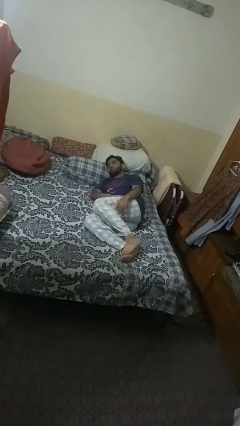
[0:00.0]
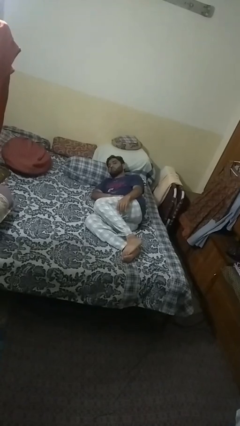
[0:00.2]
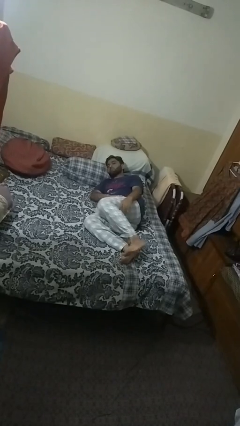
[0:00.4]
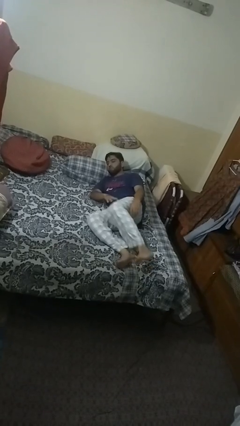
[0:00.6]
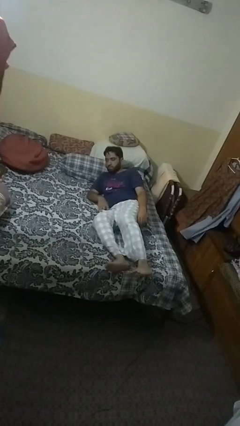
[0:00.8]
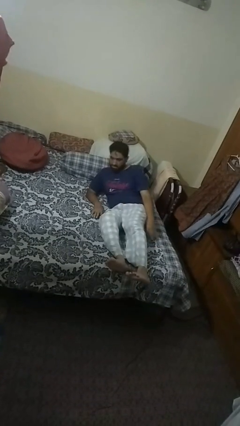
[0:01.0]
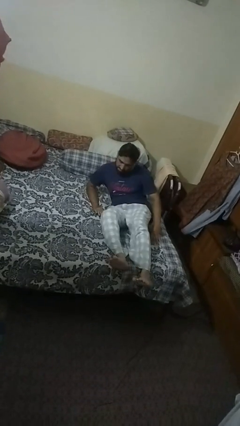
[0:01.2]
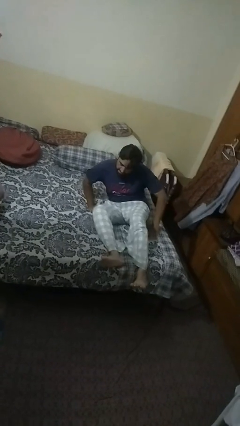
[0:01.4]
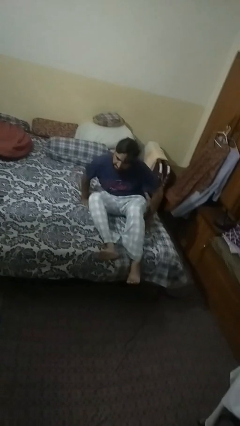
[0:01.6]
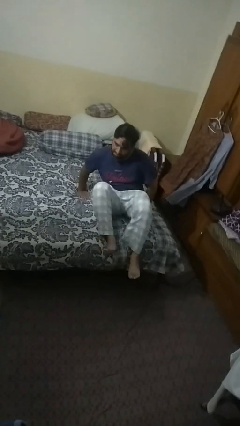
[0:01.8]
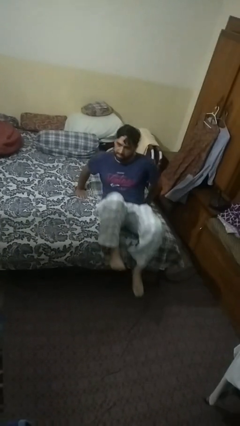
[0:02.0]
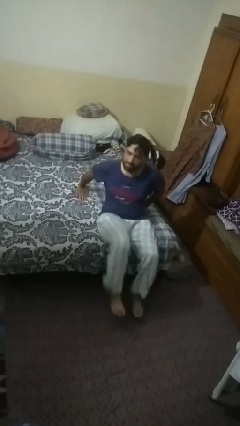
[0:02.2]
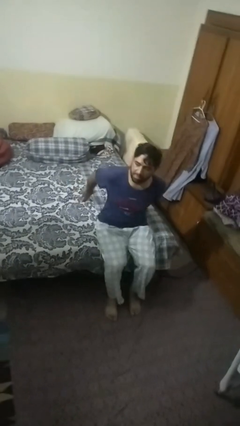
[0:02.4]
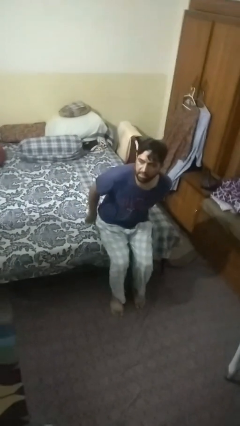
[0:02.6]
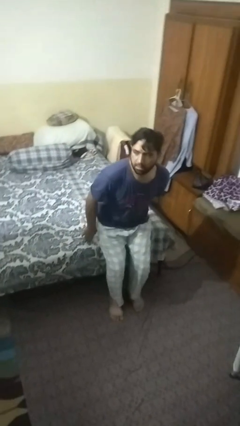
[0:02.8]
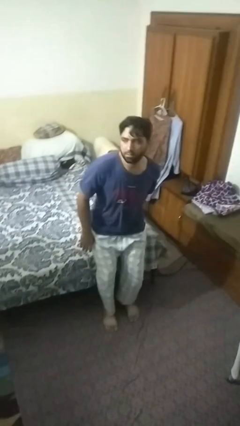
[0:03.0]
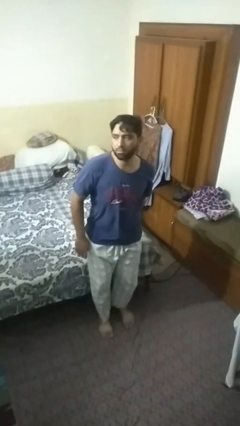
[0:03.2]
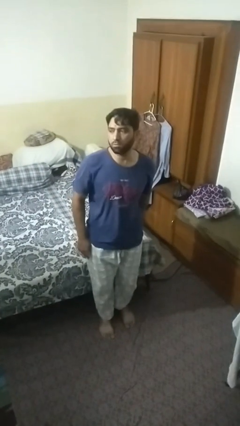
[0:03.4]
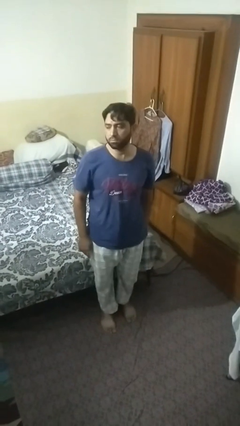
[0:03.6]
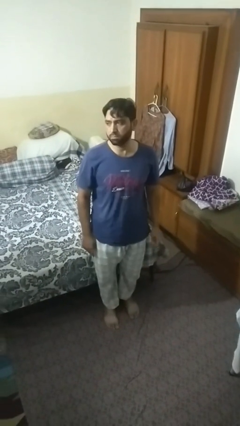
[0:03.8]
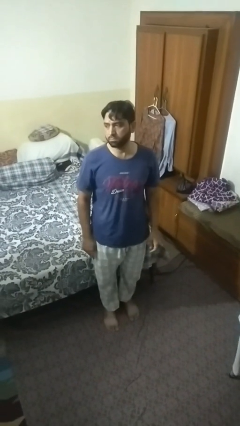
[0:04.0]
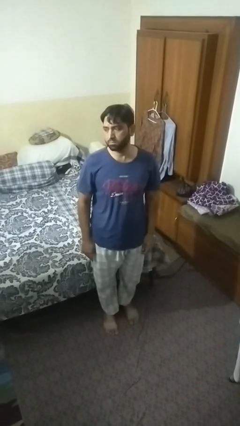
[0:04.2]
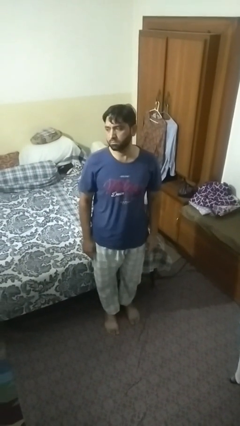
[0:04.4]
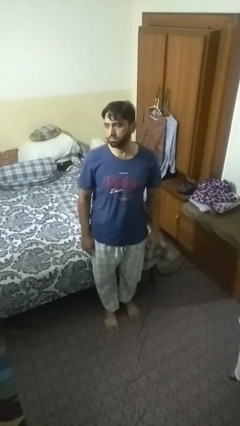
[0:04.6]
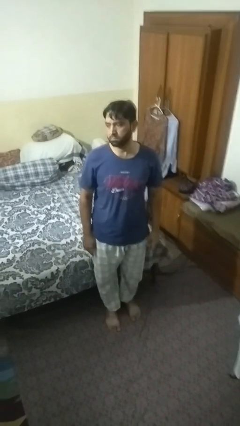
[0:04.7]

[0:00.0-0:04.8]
person stands up

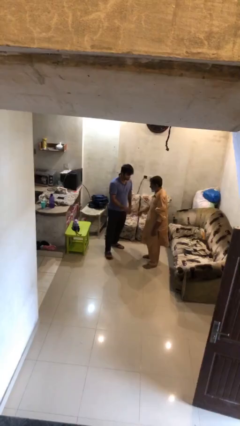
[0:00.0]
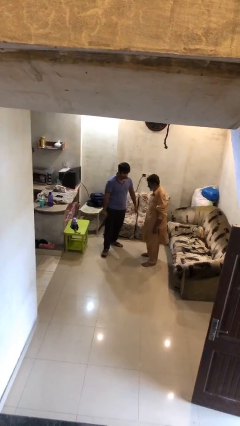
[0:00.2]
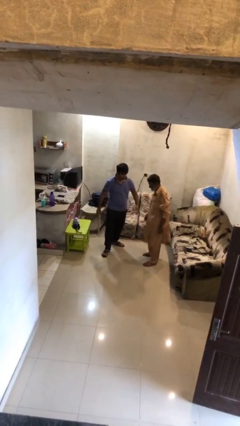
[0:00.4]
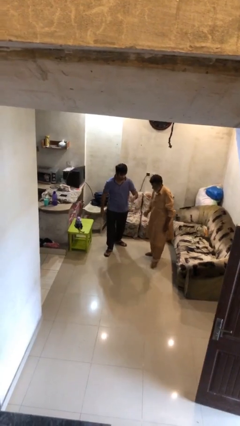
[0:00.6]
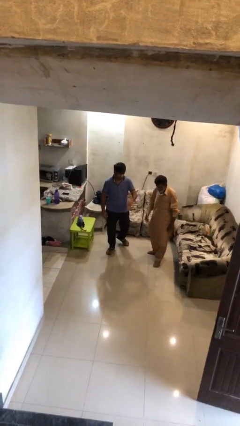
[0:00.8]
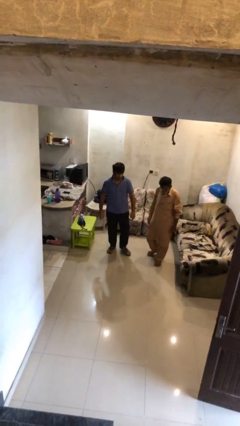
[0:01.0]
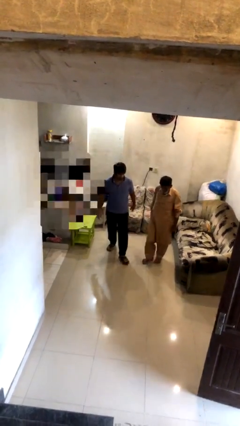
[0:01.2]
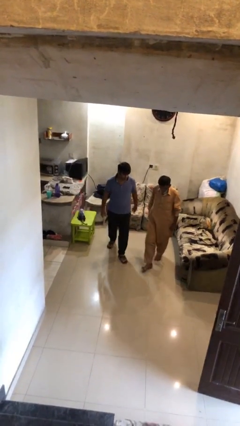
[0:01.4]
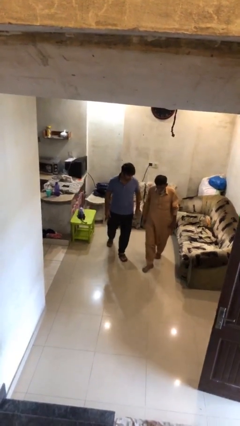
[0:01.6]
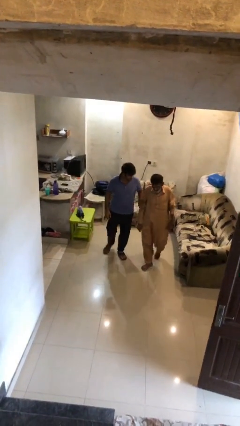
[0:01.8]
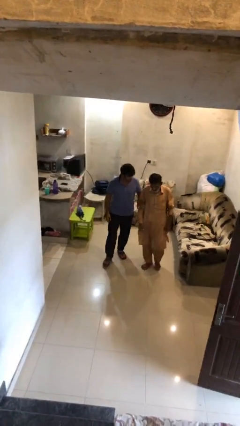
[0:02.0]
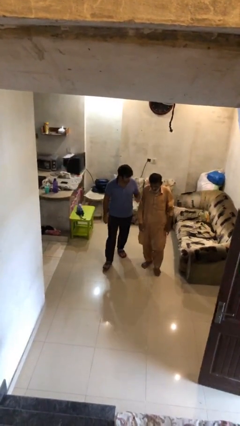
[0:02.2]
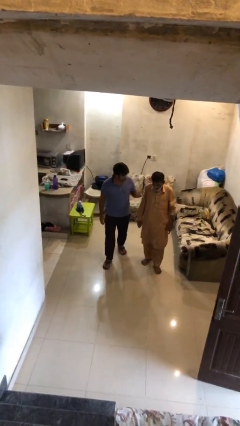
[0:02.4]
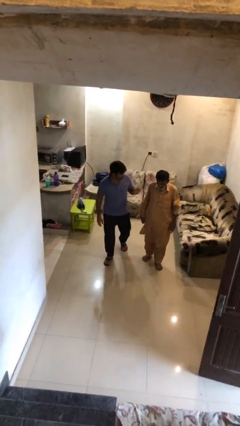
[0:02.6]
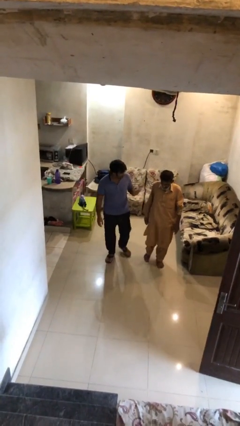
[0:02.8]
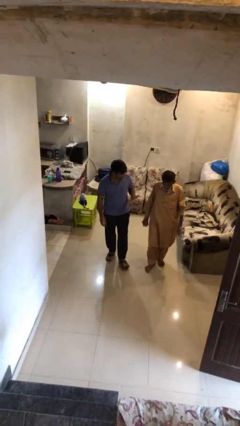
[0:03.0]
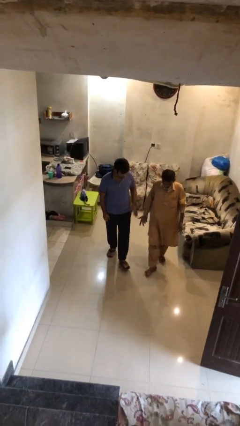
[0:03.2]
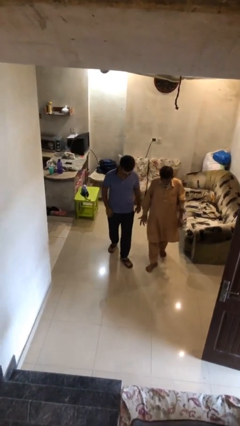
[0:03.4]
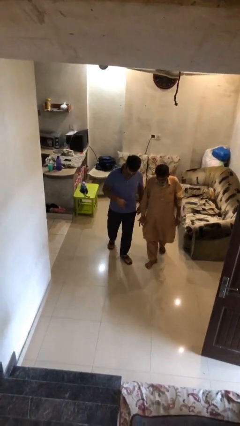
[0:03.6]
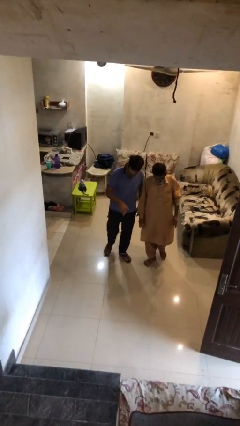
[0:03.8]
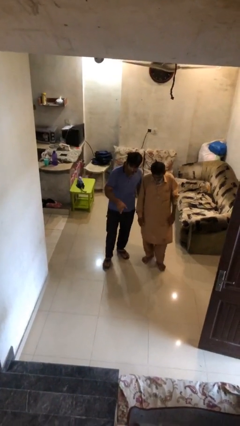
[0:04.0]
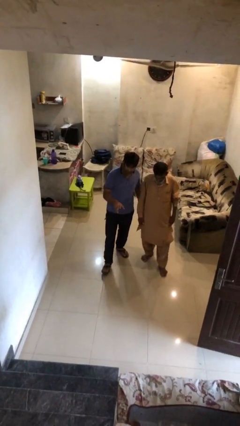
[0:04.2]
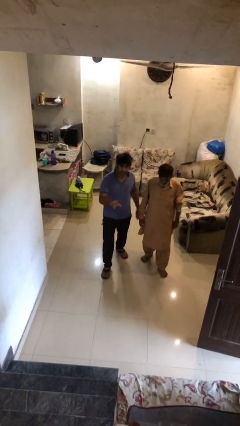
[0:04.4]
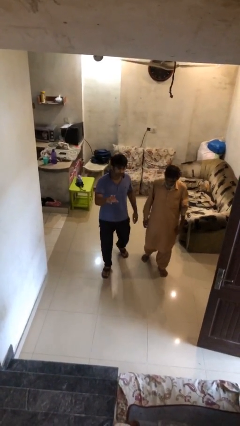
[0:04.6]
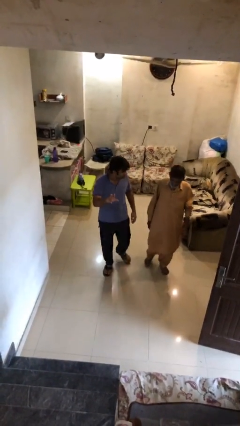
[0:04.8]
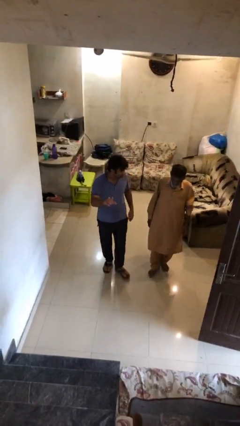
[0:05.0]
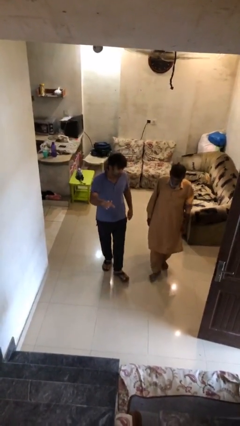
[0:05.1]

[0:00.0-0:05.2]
person talks to person

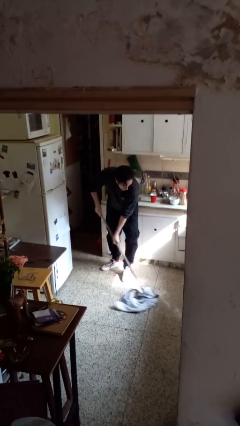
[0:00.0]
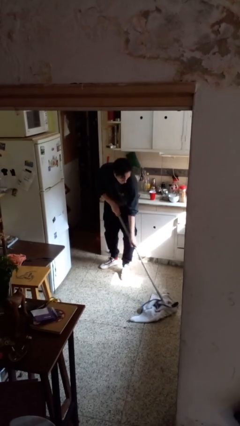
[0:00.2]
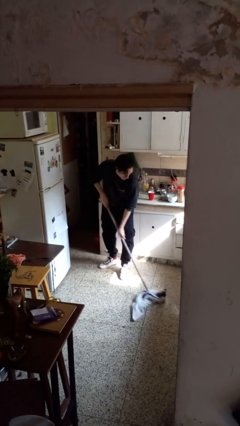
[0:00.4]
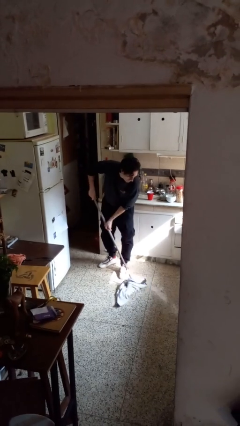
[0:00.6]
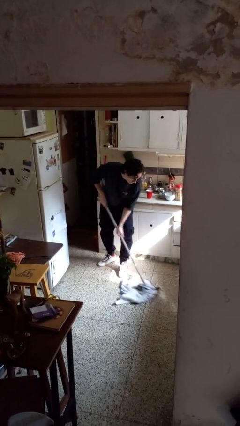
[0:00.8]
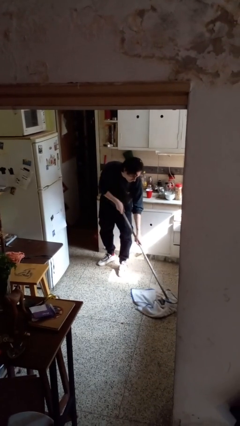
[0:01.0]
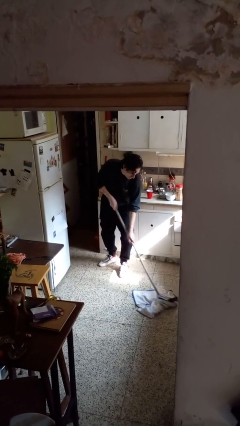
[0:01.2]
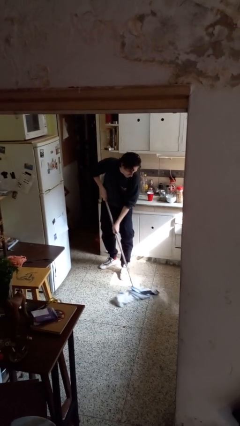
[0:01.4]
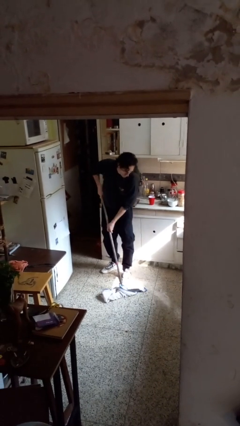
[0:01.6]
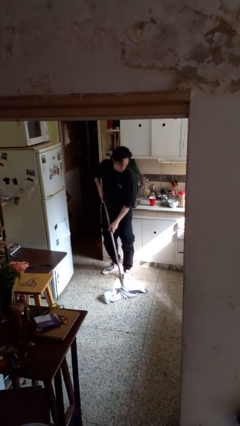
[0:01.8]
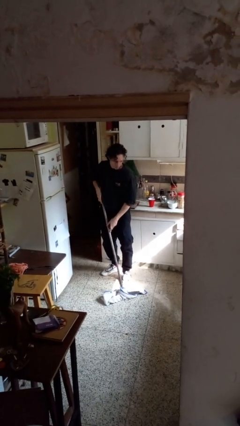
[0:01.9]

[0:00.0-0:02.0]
person mops

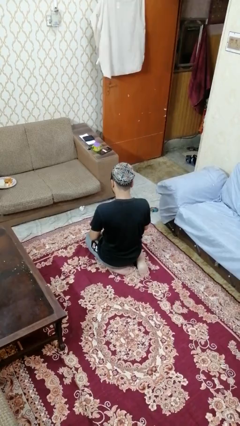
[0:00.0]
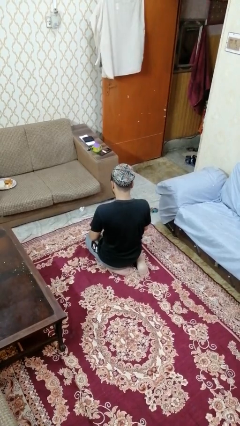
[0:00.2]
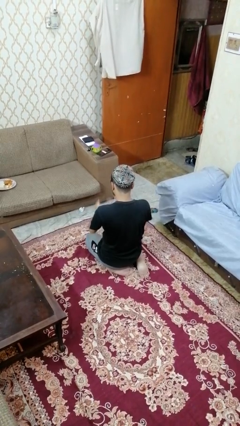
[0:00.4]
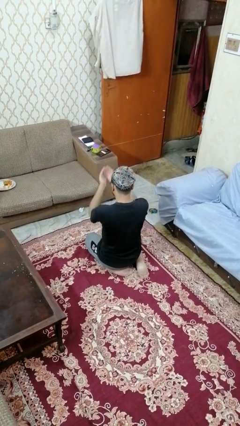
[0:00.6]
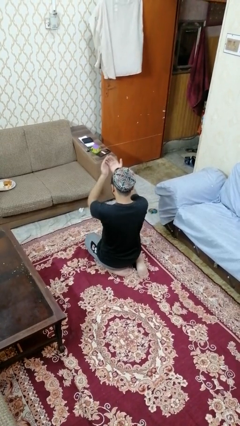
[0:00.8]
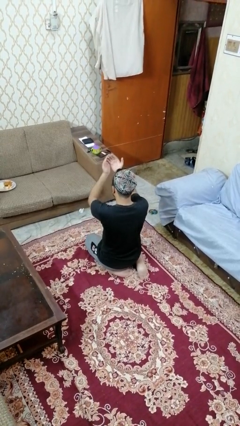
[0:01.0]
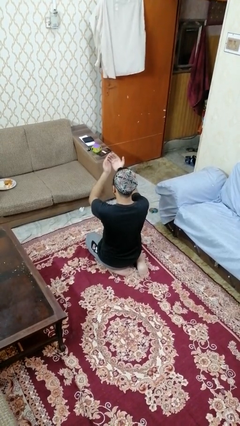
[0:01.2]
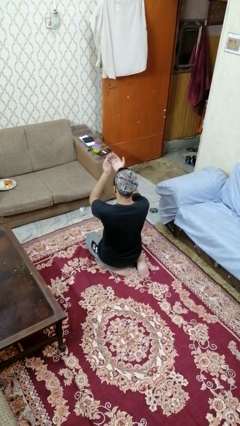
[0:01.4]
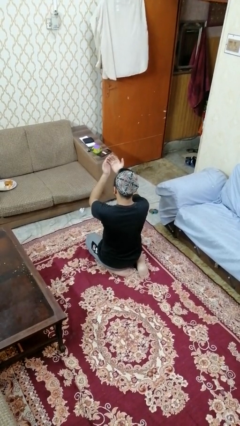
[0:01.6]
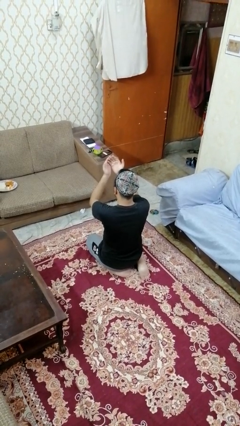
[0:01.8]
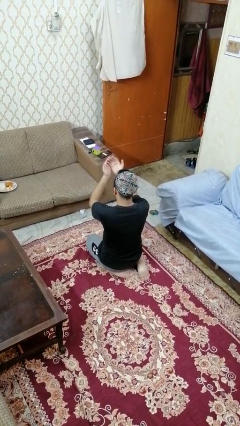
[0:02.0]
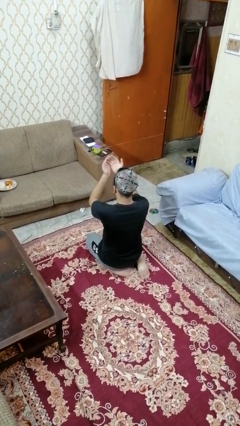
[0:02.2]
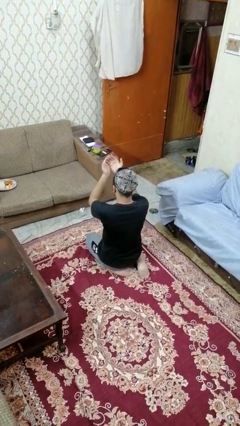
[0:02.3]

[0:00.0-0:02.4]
person prays

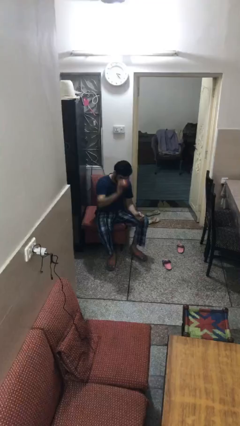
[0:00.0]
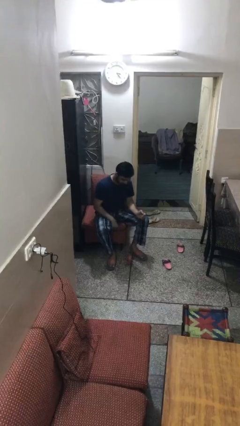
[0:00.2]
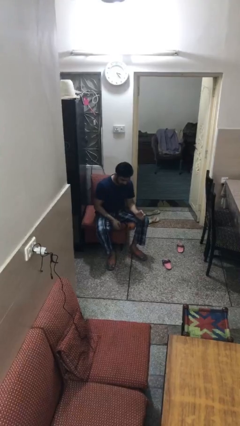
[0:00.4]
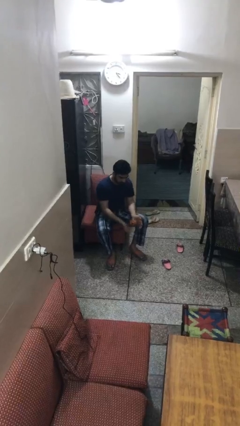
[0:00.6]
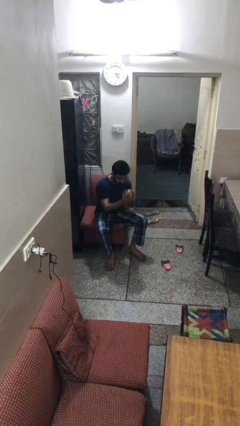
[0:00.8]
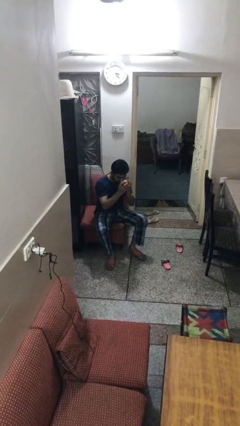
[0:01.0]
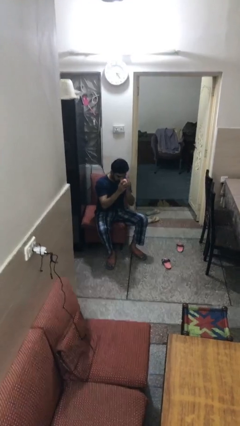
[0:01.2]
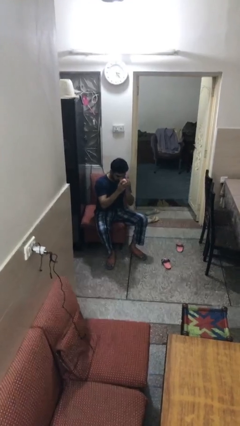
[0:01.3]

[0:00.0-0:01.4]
person bounces ball on floor

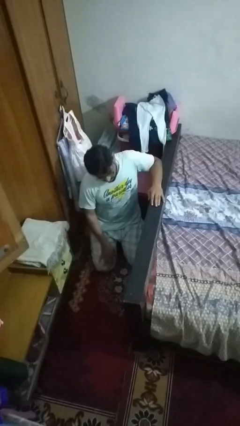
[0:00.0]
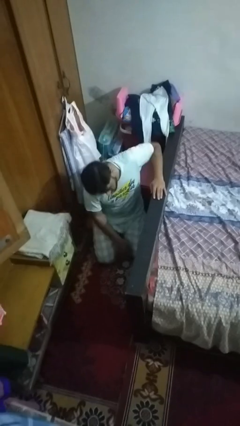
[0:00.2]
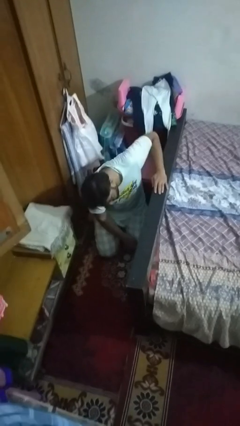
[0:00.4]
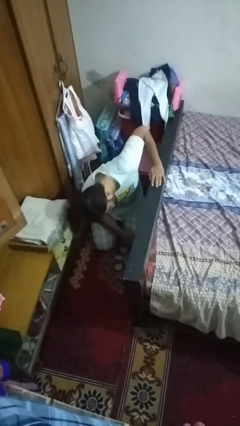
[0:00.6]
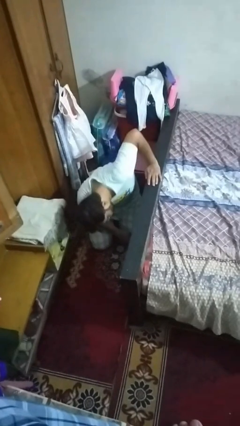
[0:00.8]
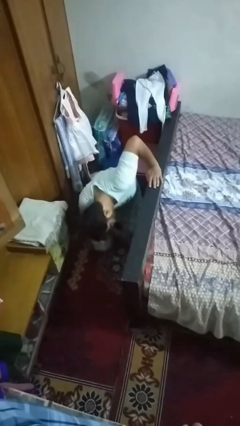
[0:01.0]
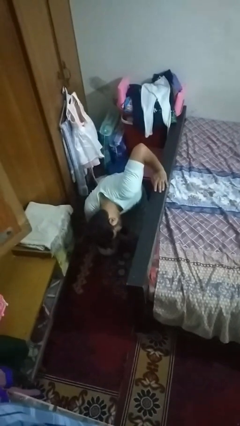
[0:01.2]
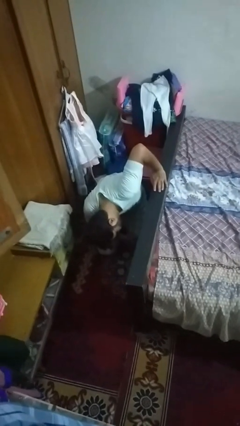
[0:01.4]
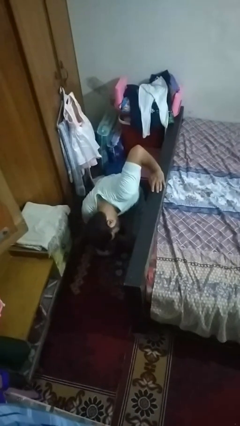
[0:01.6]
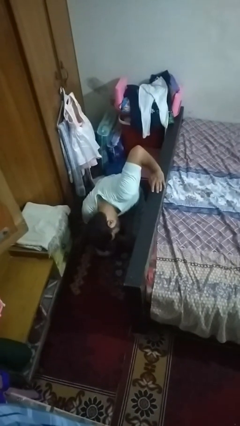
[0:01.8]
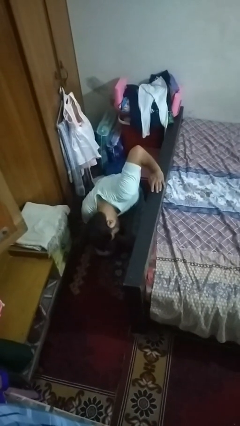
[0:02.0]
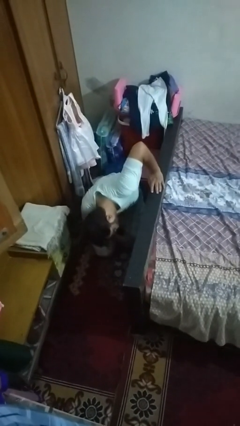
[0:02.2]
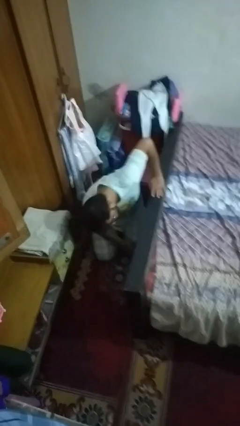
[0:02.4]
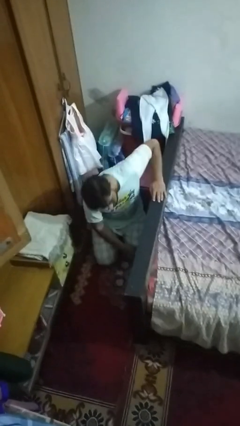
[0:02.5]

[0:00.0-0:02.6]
person searches under bed
